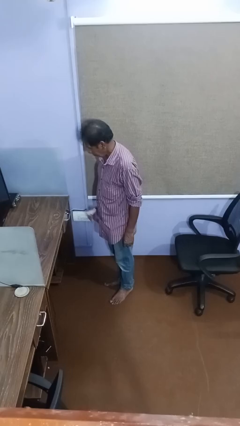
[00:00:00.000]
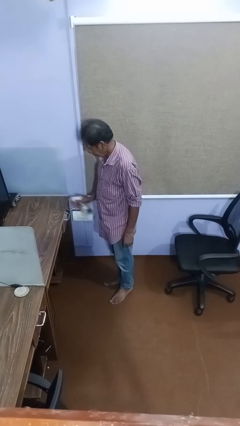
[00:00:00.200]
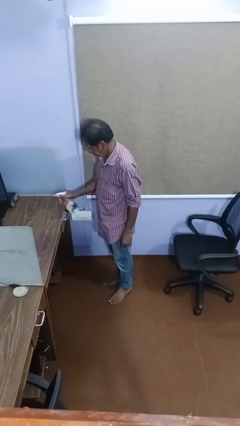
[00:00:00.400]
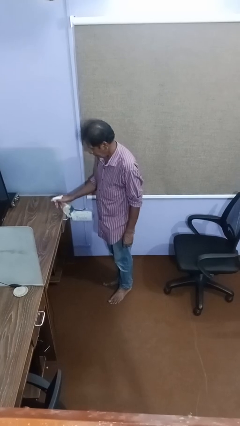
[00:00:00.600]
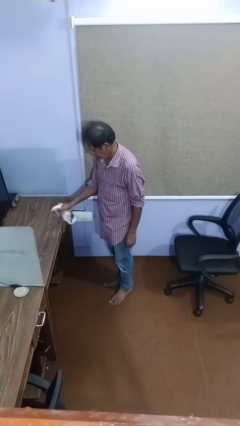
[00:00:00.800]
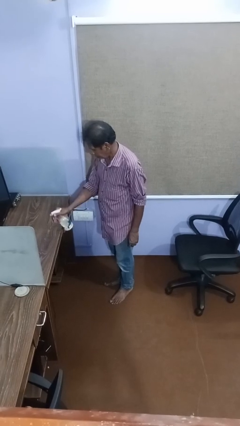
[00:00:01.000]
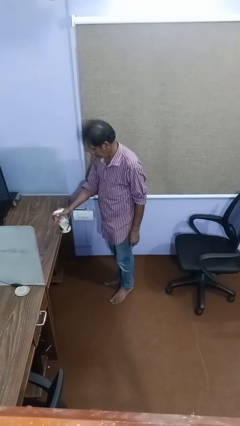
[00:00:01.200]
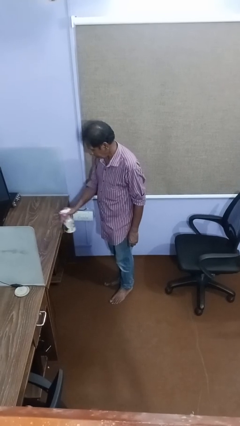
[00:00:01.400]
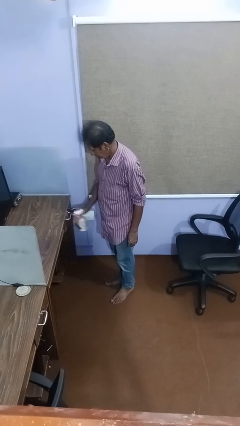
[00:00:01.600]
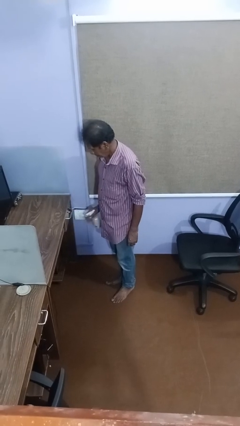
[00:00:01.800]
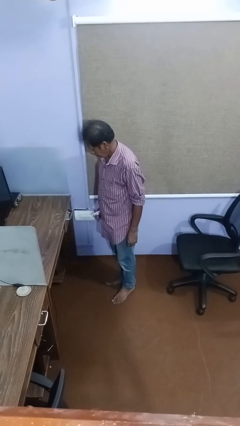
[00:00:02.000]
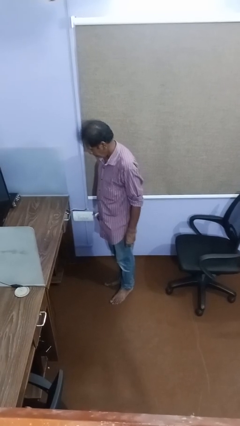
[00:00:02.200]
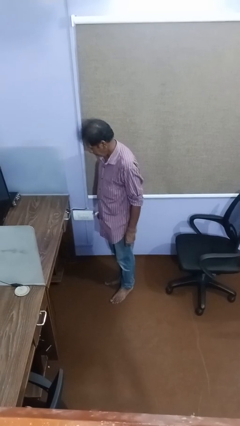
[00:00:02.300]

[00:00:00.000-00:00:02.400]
person sprays from bottle

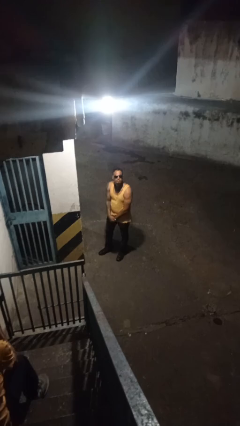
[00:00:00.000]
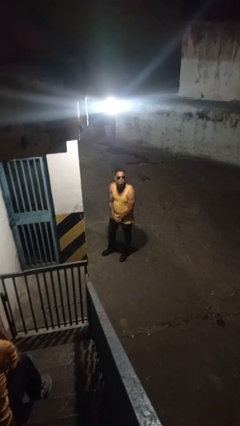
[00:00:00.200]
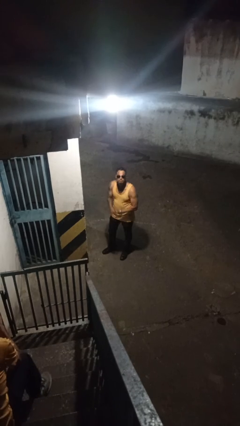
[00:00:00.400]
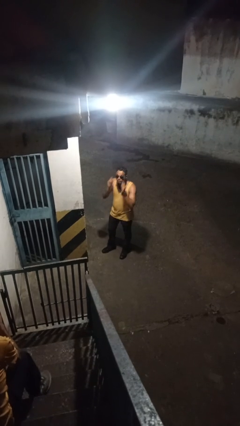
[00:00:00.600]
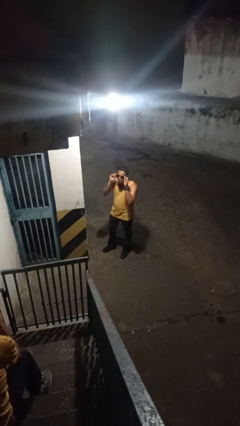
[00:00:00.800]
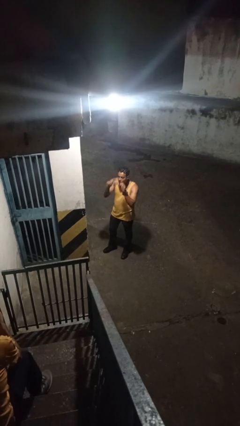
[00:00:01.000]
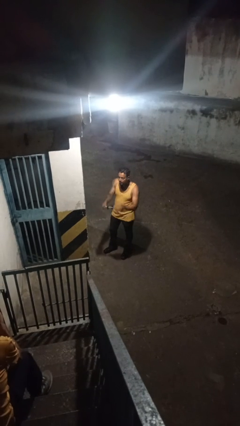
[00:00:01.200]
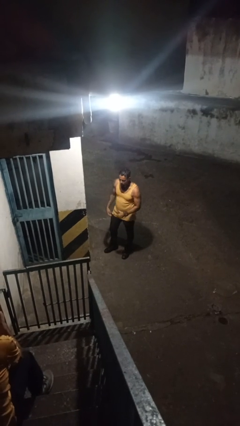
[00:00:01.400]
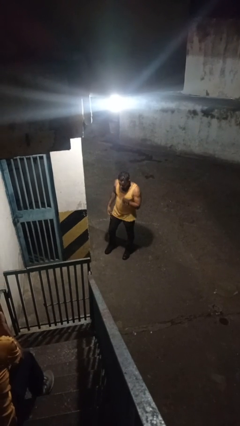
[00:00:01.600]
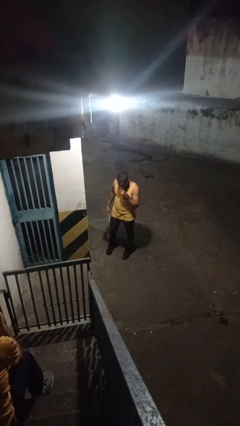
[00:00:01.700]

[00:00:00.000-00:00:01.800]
person takes off sunglasses

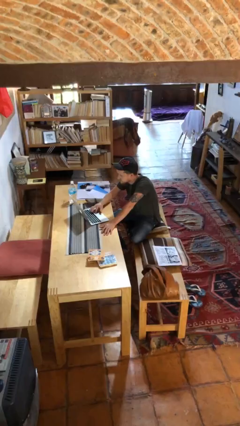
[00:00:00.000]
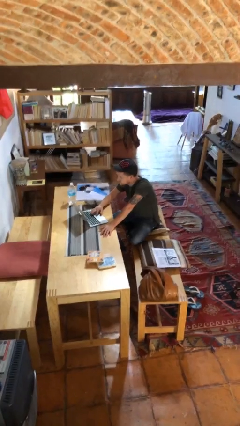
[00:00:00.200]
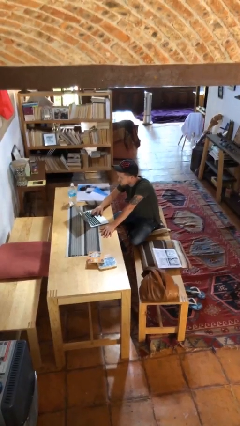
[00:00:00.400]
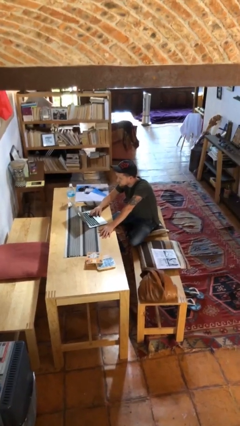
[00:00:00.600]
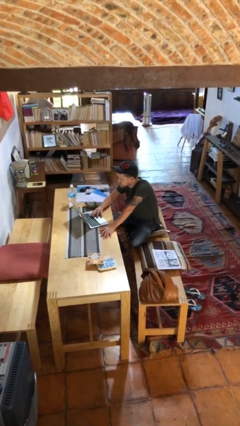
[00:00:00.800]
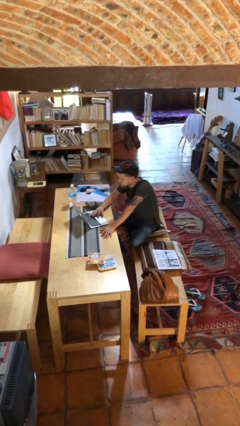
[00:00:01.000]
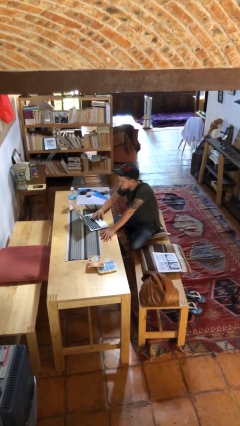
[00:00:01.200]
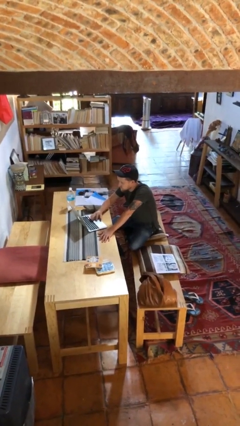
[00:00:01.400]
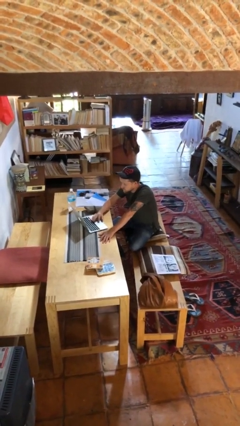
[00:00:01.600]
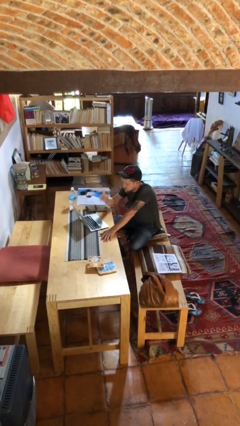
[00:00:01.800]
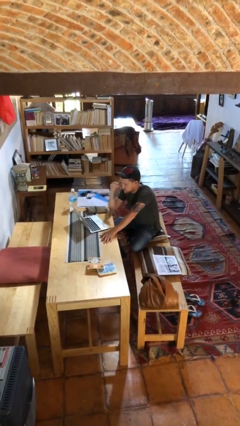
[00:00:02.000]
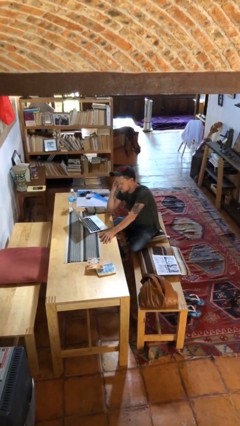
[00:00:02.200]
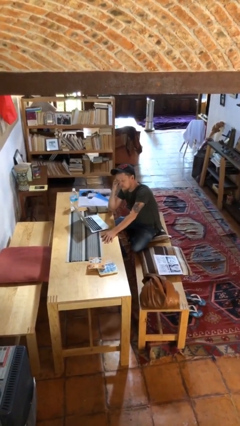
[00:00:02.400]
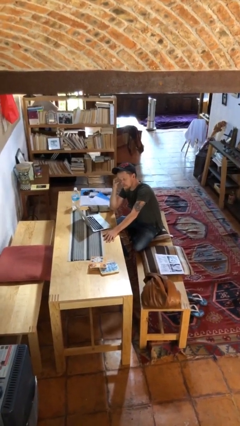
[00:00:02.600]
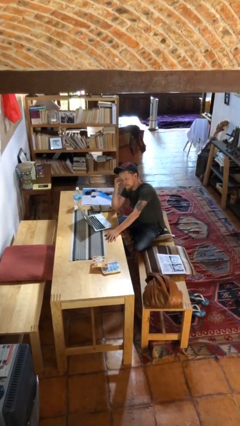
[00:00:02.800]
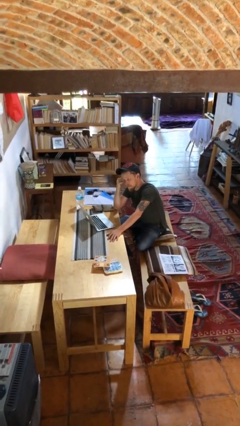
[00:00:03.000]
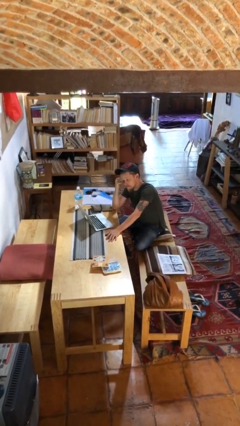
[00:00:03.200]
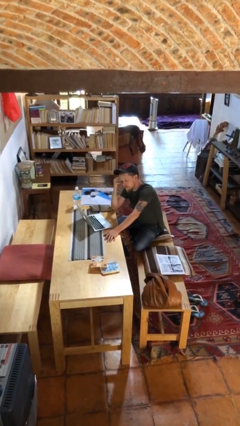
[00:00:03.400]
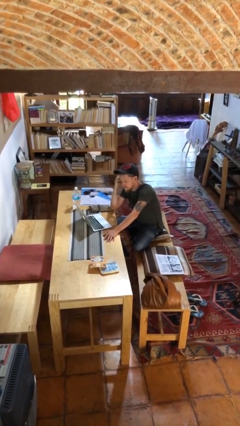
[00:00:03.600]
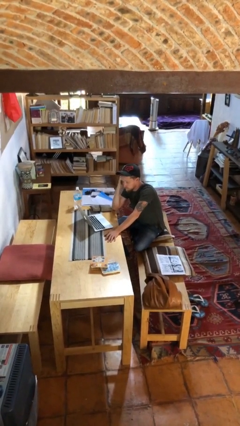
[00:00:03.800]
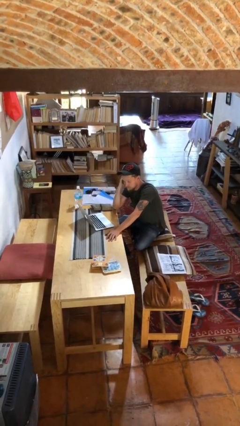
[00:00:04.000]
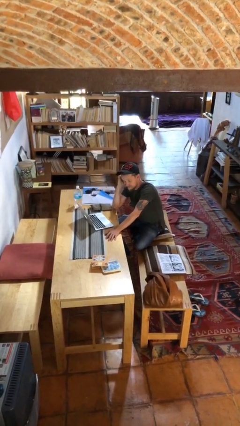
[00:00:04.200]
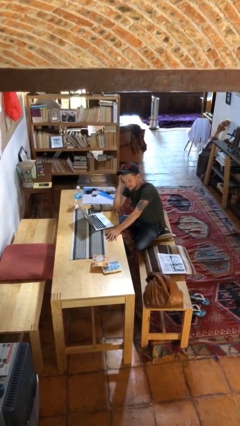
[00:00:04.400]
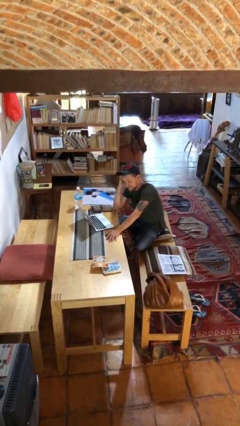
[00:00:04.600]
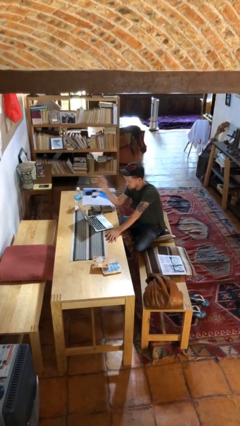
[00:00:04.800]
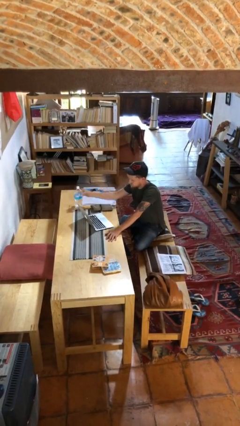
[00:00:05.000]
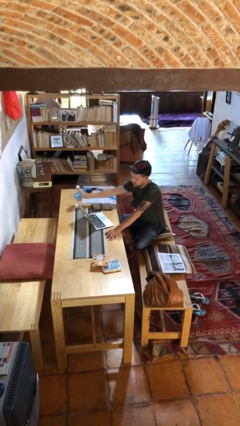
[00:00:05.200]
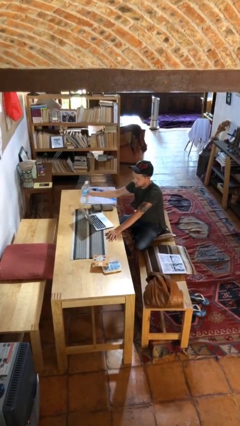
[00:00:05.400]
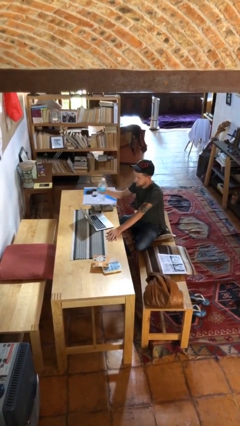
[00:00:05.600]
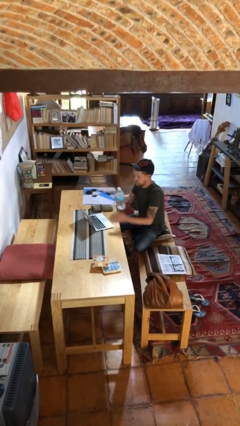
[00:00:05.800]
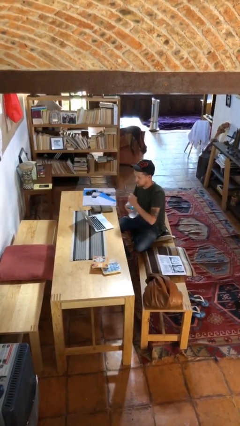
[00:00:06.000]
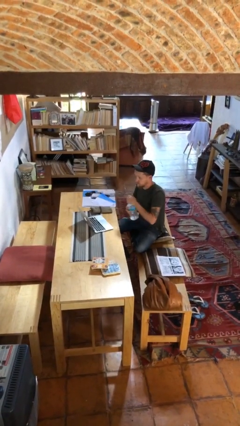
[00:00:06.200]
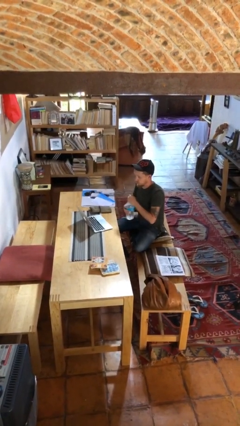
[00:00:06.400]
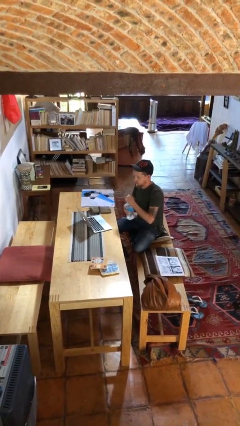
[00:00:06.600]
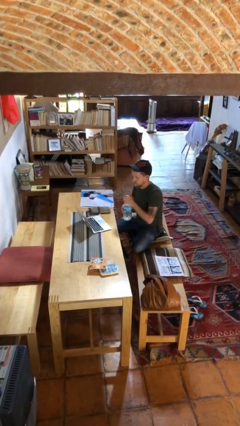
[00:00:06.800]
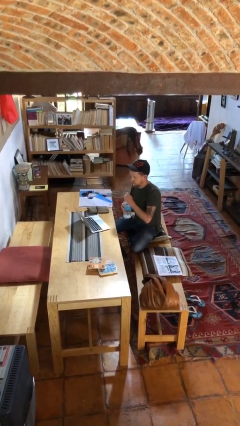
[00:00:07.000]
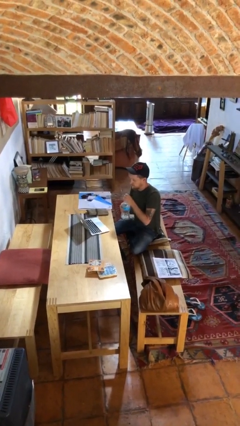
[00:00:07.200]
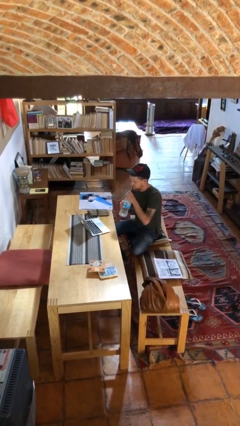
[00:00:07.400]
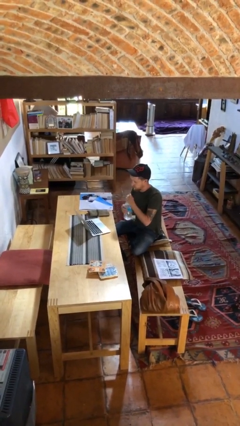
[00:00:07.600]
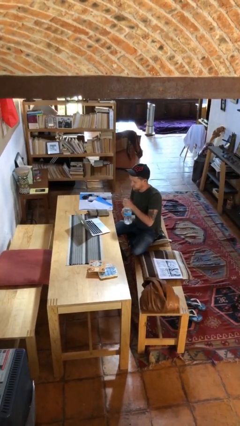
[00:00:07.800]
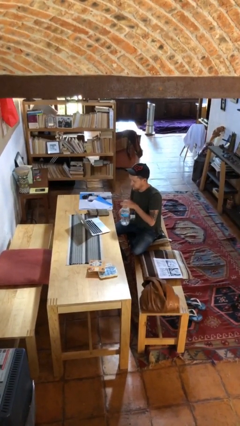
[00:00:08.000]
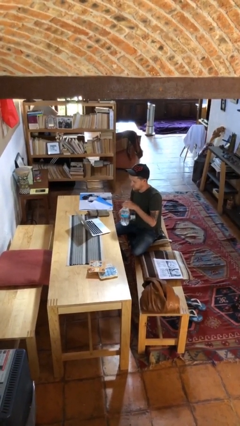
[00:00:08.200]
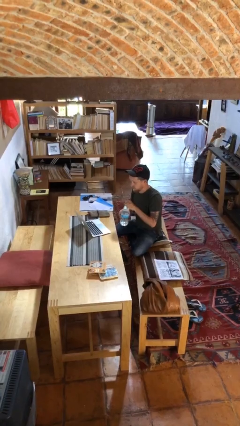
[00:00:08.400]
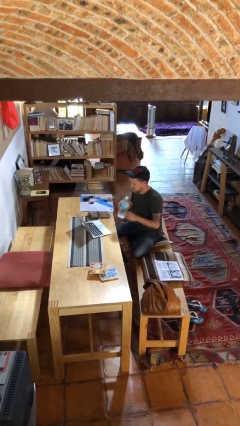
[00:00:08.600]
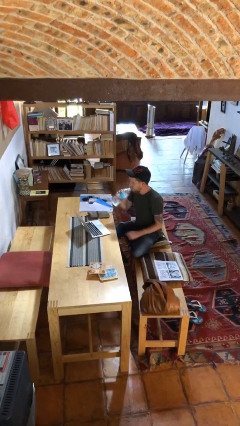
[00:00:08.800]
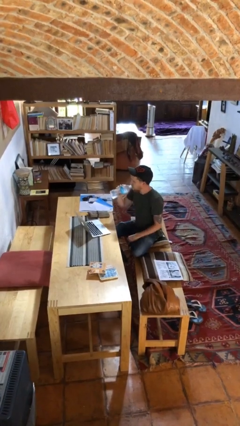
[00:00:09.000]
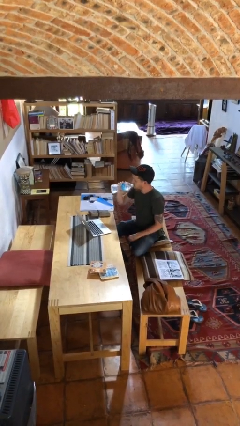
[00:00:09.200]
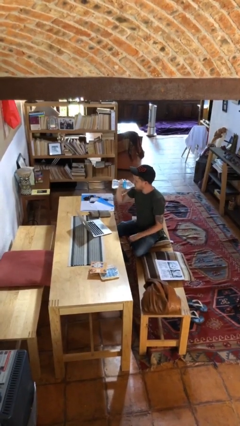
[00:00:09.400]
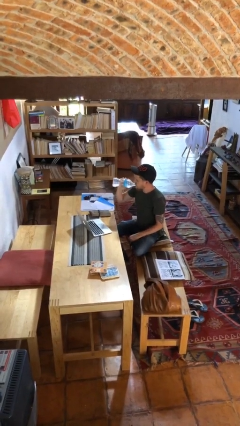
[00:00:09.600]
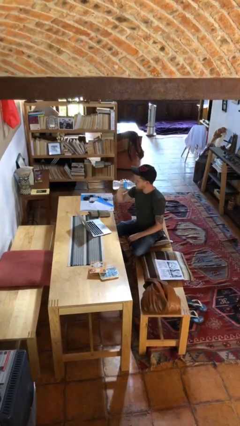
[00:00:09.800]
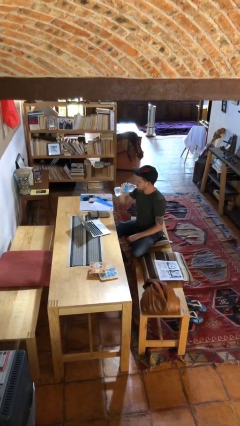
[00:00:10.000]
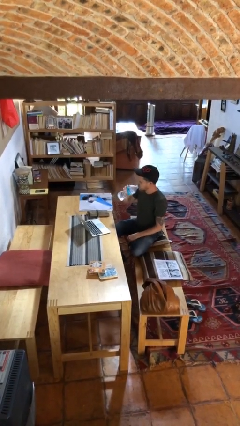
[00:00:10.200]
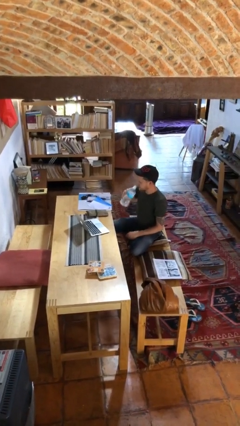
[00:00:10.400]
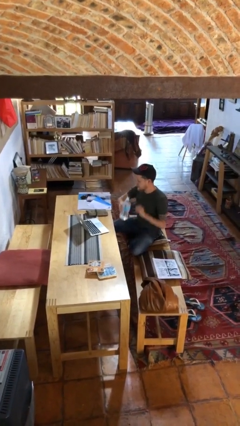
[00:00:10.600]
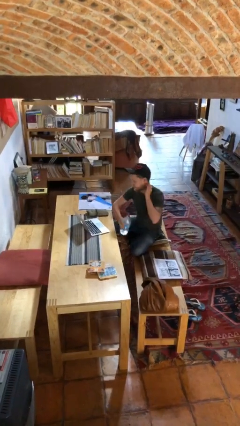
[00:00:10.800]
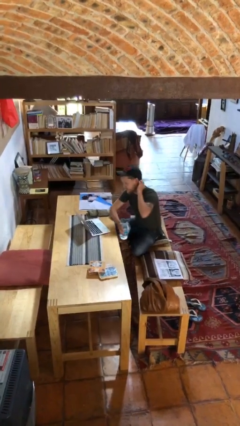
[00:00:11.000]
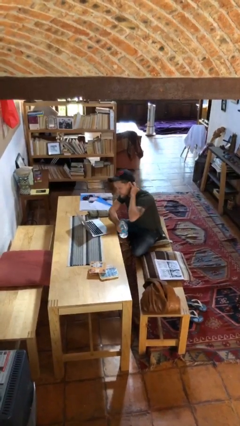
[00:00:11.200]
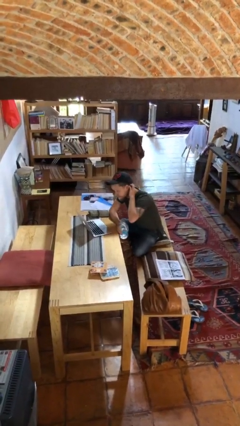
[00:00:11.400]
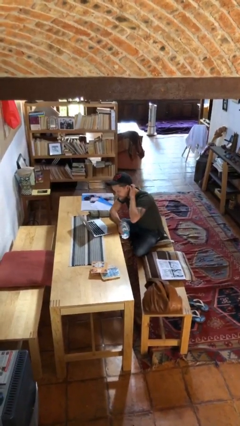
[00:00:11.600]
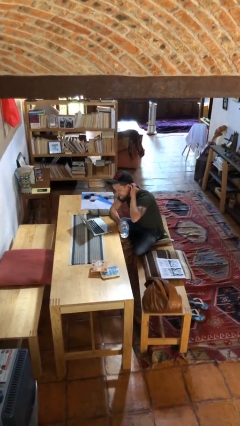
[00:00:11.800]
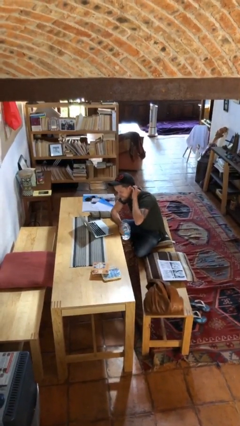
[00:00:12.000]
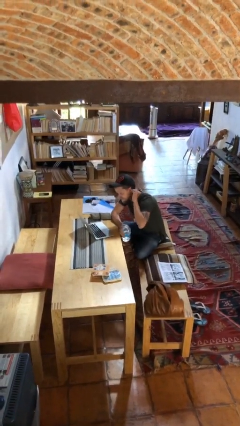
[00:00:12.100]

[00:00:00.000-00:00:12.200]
person interacts with laptop

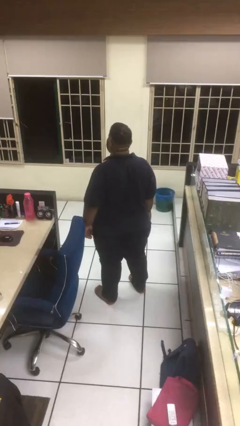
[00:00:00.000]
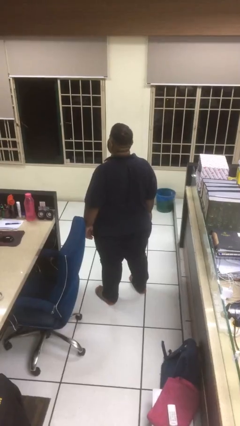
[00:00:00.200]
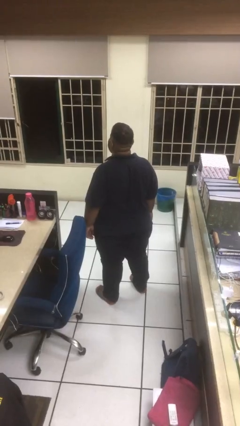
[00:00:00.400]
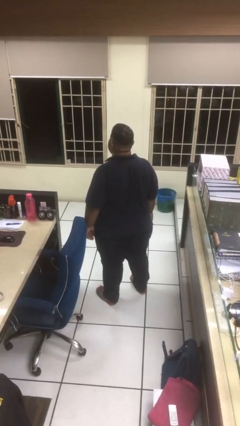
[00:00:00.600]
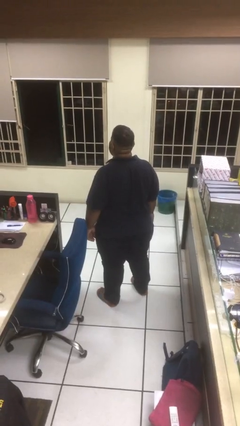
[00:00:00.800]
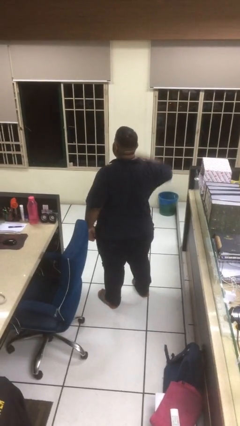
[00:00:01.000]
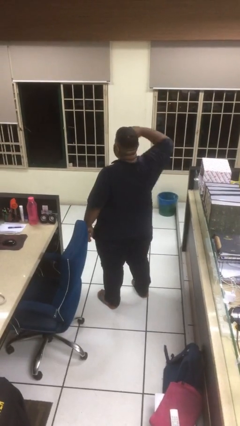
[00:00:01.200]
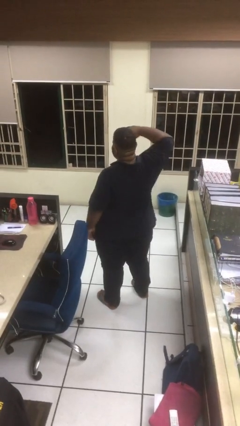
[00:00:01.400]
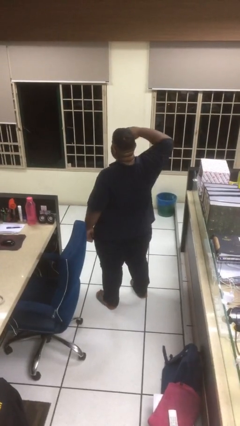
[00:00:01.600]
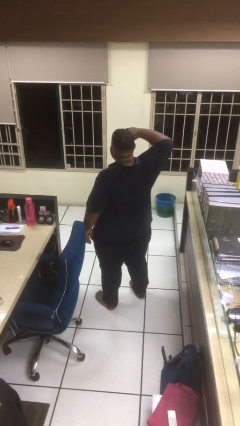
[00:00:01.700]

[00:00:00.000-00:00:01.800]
person salutes
